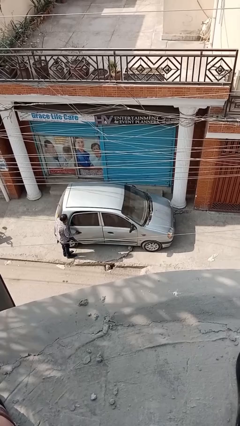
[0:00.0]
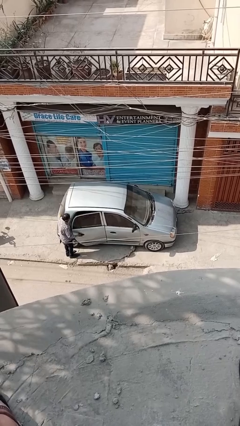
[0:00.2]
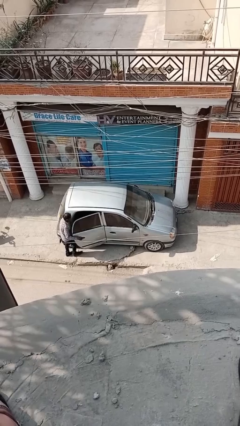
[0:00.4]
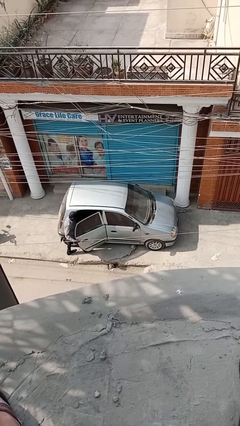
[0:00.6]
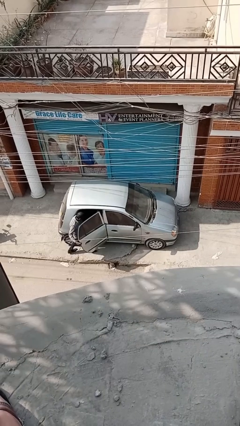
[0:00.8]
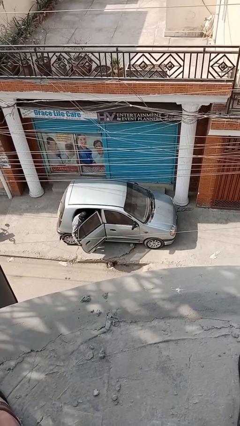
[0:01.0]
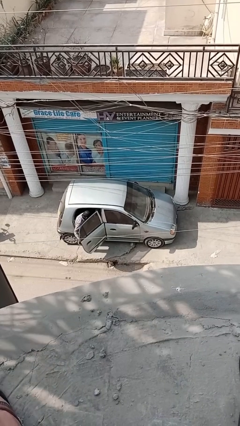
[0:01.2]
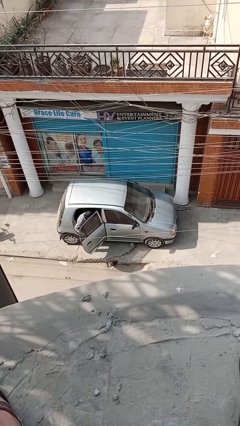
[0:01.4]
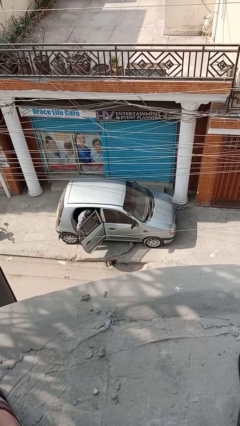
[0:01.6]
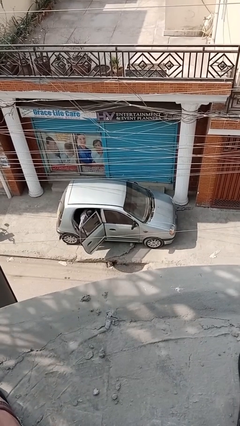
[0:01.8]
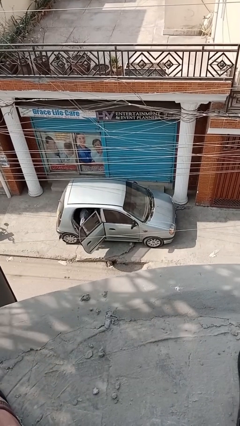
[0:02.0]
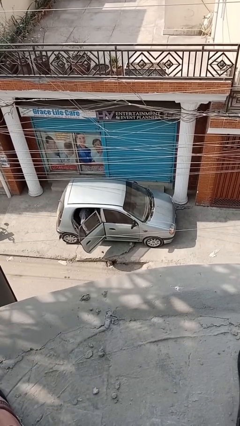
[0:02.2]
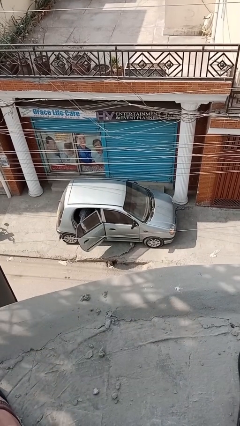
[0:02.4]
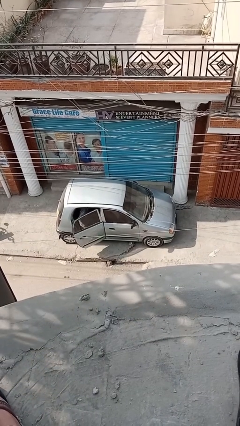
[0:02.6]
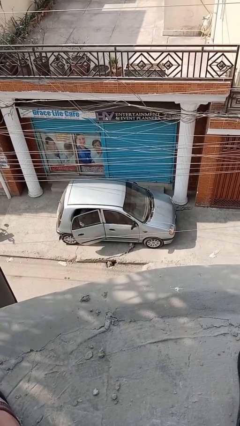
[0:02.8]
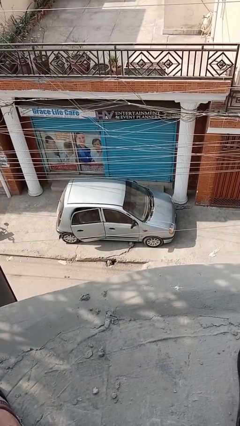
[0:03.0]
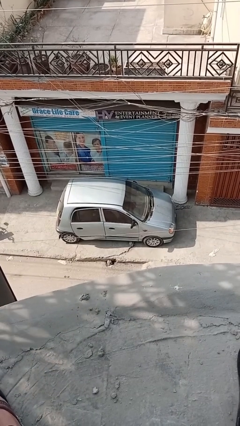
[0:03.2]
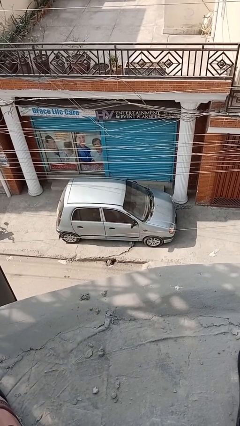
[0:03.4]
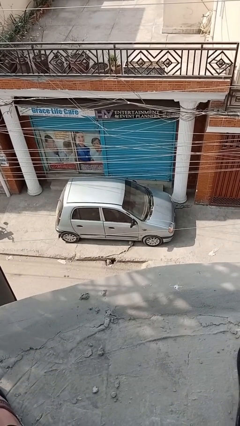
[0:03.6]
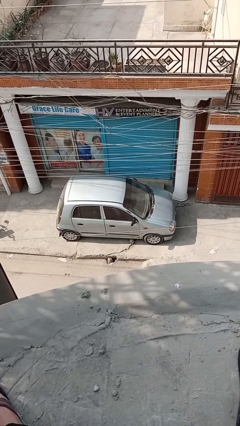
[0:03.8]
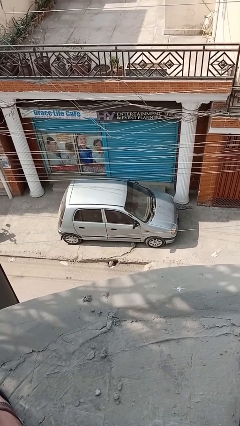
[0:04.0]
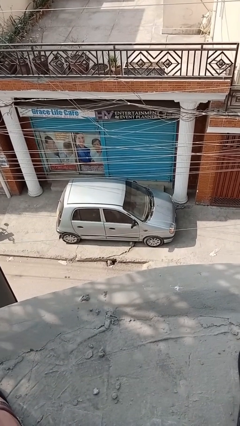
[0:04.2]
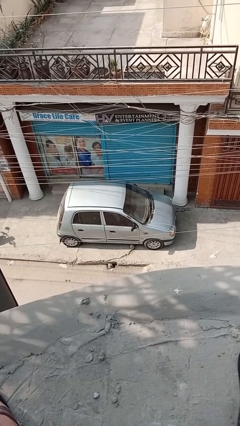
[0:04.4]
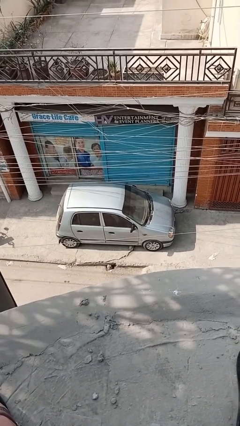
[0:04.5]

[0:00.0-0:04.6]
car picks up person

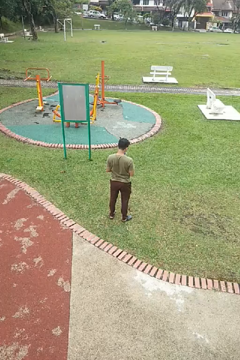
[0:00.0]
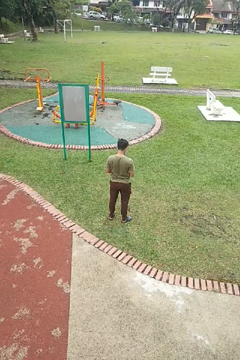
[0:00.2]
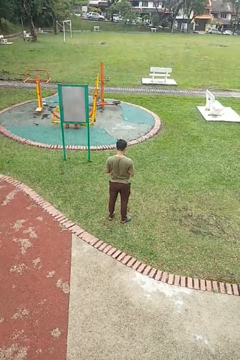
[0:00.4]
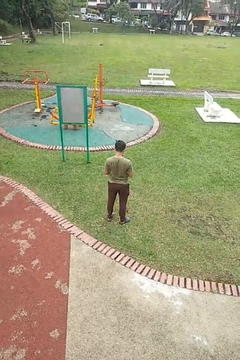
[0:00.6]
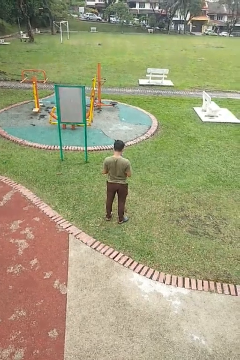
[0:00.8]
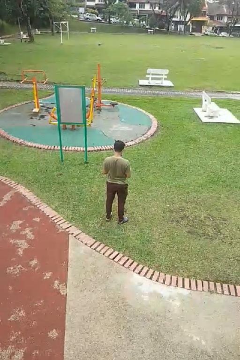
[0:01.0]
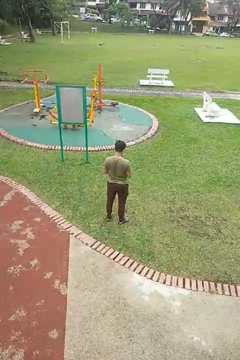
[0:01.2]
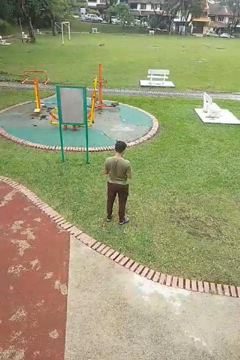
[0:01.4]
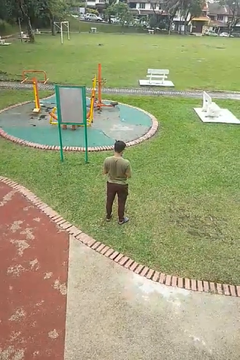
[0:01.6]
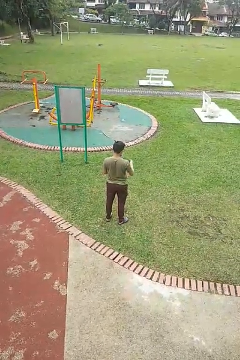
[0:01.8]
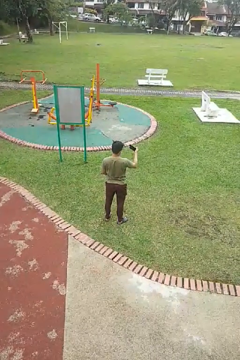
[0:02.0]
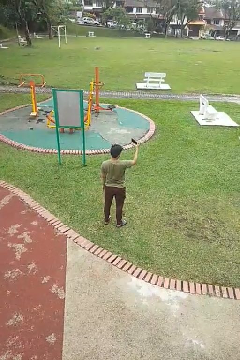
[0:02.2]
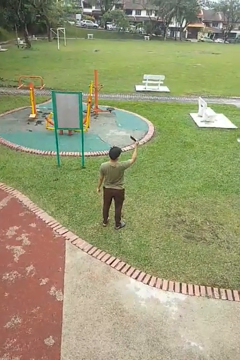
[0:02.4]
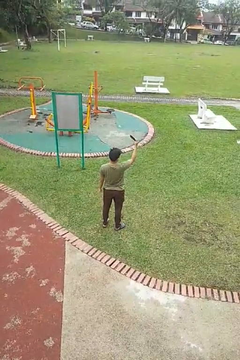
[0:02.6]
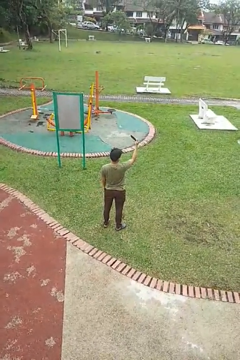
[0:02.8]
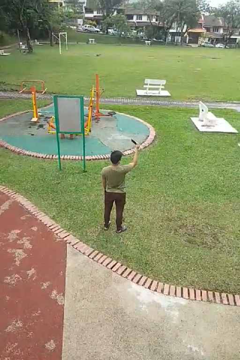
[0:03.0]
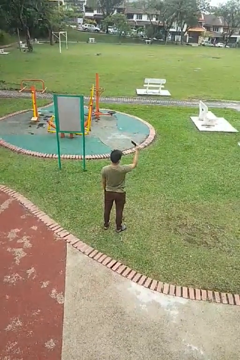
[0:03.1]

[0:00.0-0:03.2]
person takes selfie

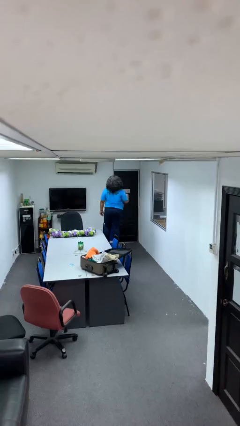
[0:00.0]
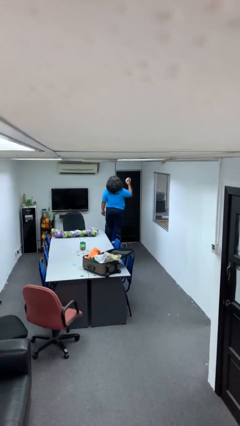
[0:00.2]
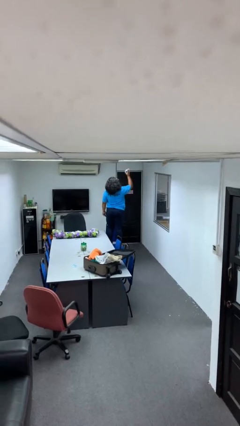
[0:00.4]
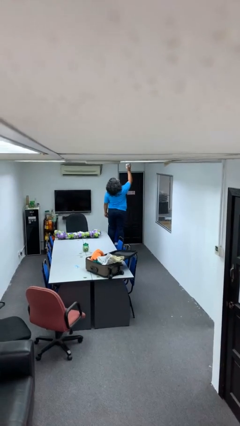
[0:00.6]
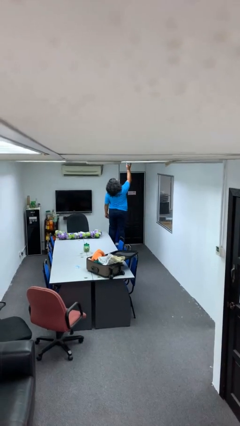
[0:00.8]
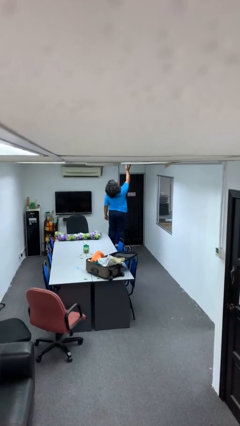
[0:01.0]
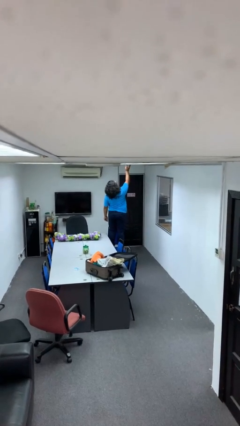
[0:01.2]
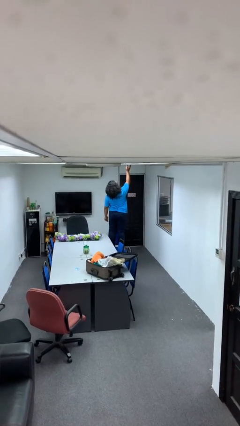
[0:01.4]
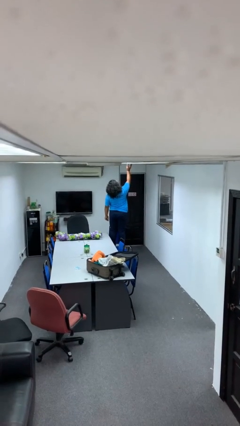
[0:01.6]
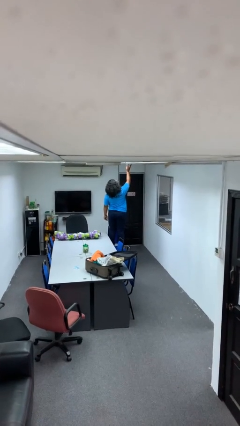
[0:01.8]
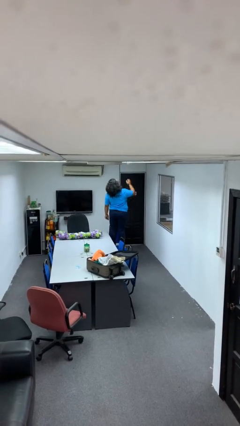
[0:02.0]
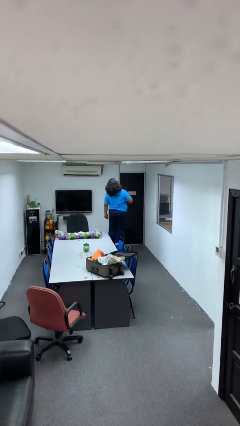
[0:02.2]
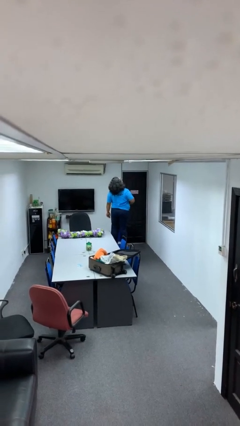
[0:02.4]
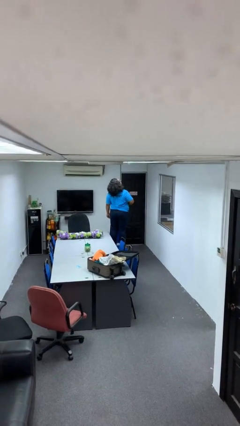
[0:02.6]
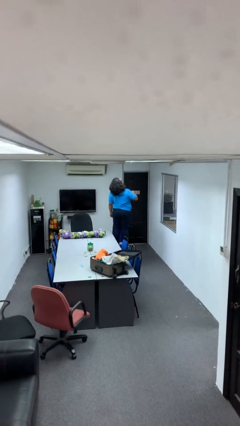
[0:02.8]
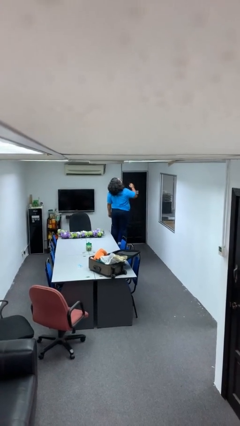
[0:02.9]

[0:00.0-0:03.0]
person puts up smoke detector

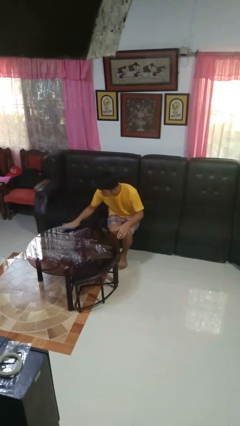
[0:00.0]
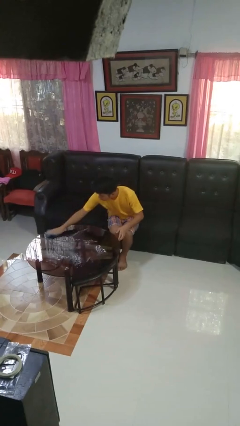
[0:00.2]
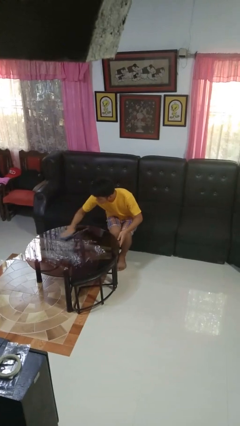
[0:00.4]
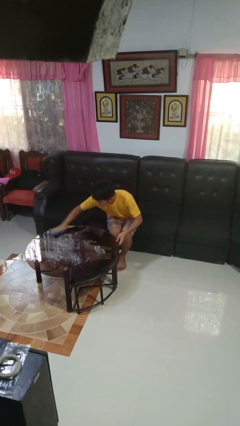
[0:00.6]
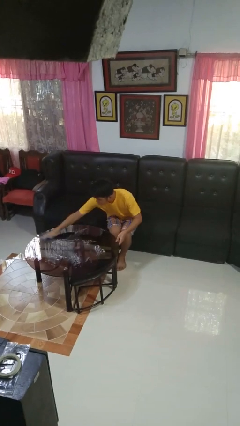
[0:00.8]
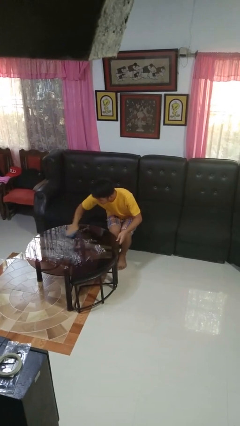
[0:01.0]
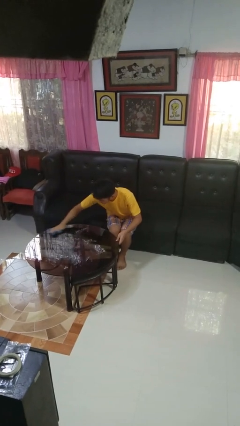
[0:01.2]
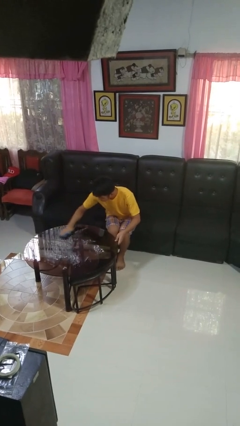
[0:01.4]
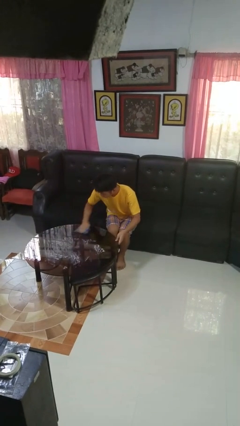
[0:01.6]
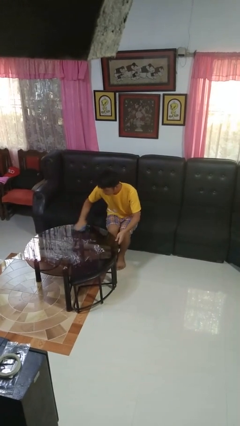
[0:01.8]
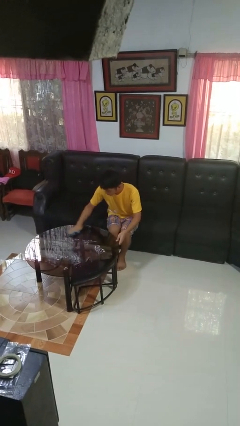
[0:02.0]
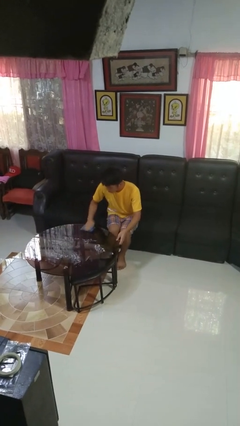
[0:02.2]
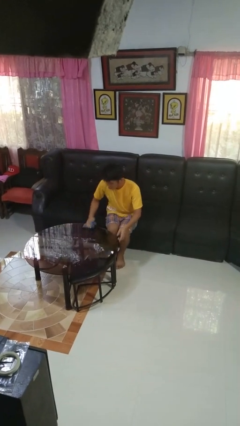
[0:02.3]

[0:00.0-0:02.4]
person cleans table with rag

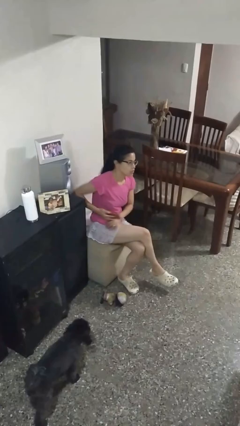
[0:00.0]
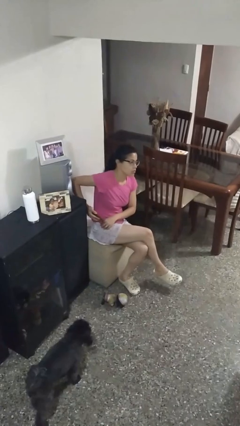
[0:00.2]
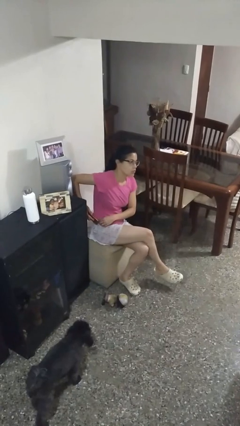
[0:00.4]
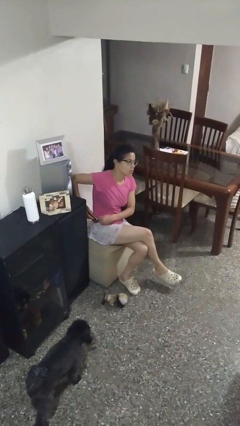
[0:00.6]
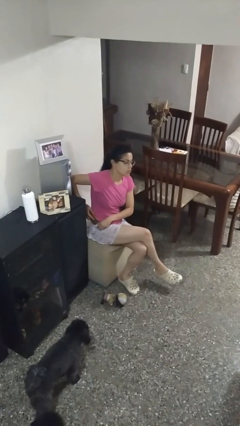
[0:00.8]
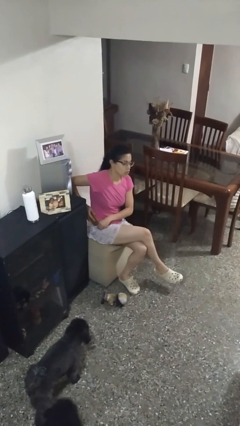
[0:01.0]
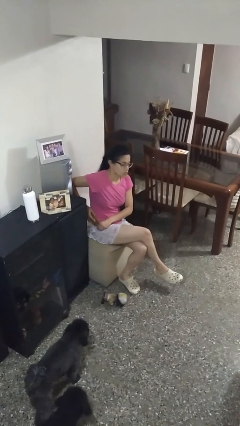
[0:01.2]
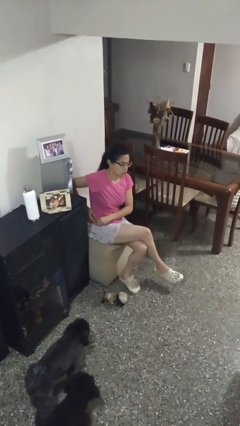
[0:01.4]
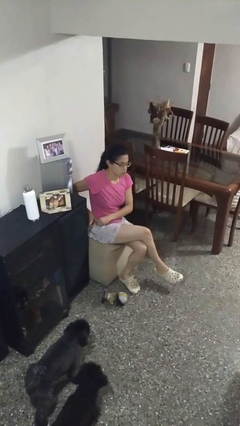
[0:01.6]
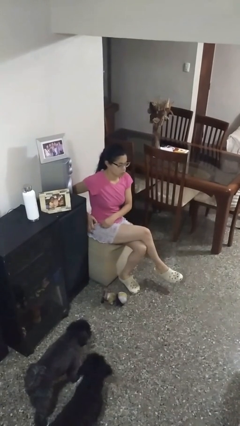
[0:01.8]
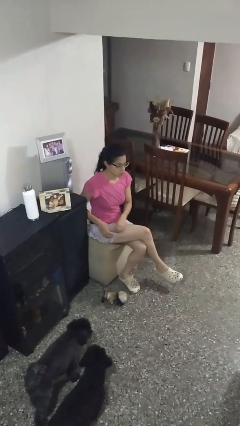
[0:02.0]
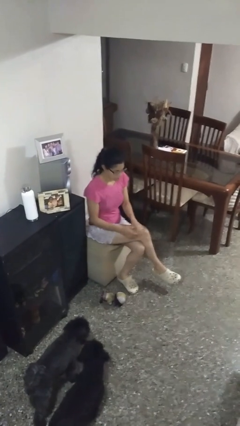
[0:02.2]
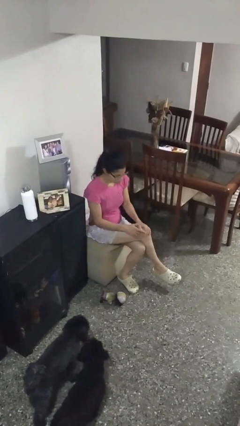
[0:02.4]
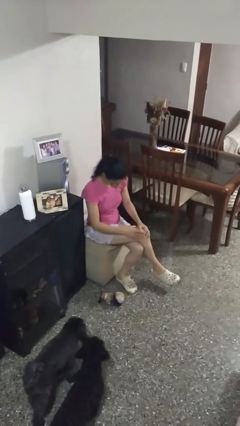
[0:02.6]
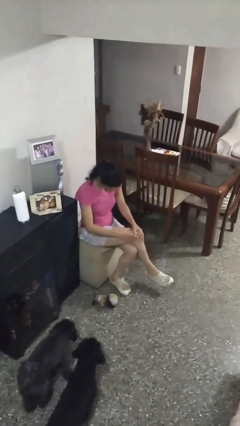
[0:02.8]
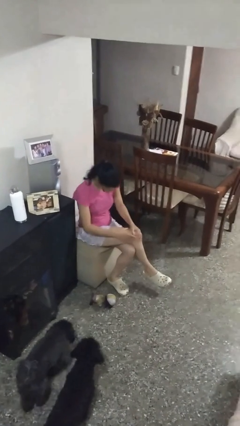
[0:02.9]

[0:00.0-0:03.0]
person puts phone into pocket

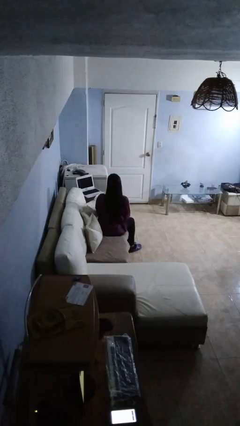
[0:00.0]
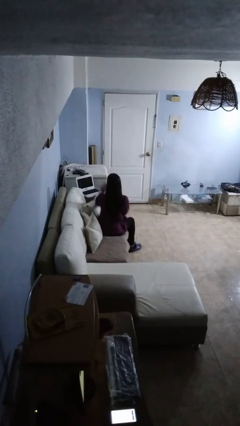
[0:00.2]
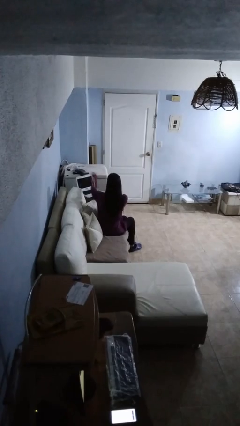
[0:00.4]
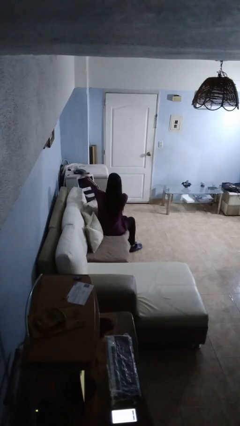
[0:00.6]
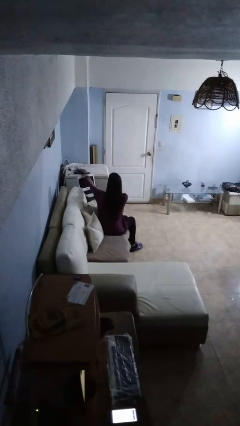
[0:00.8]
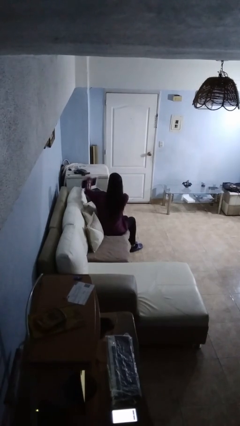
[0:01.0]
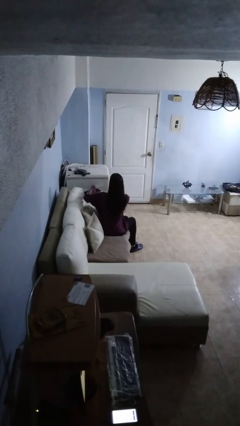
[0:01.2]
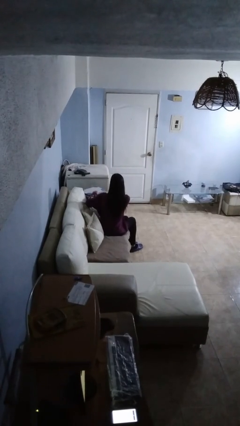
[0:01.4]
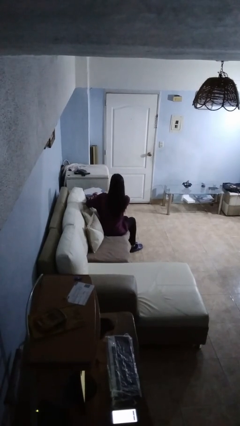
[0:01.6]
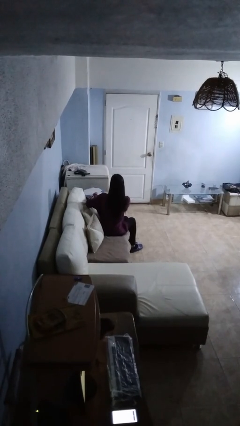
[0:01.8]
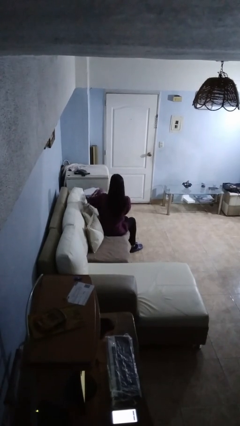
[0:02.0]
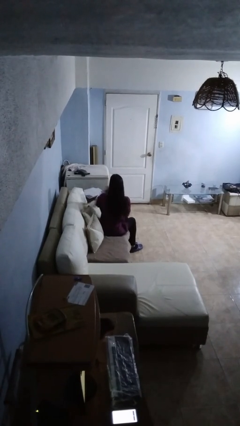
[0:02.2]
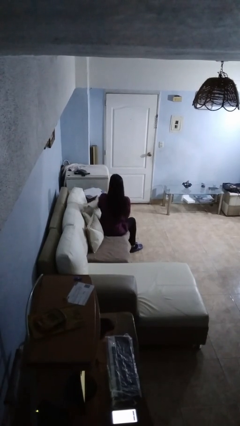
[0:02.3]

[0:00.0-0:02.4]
person closes laptop
